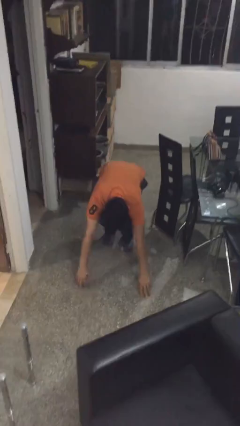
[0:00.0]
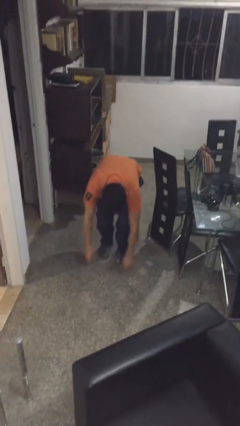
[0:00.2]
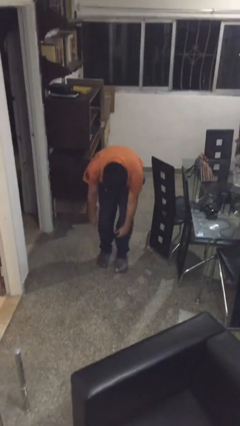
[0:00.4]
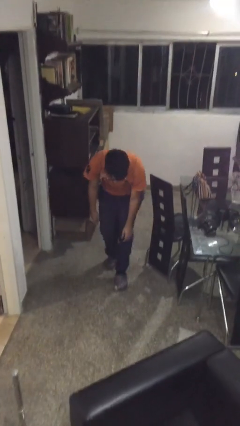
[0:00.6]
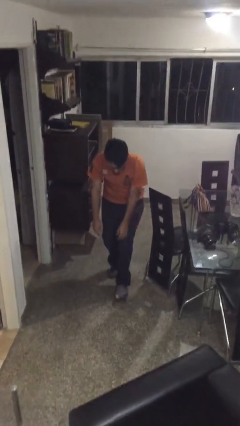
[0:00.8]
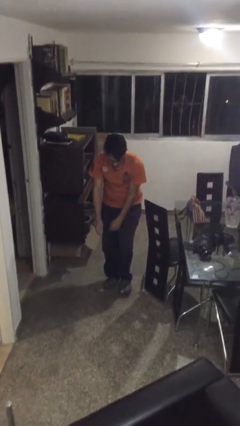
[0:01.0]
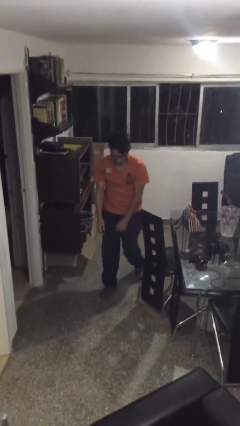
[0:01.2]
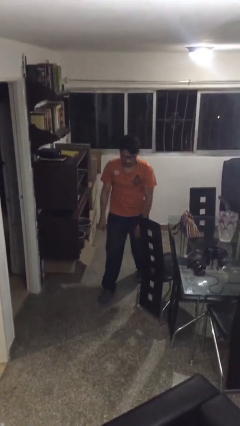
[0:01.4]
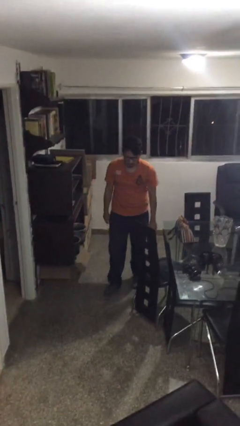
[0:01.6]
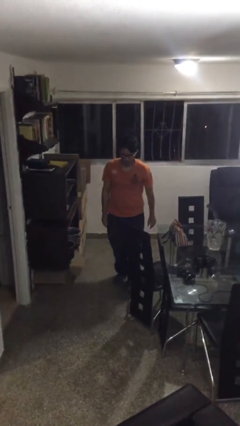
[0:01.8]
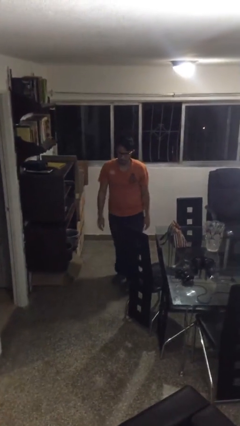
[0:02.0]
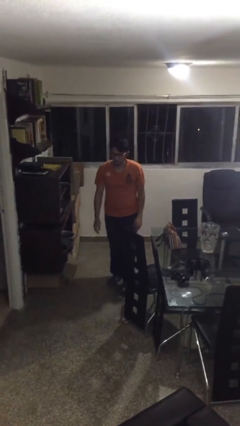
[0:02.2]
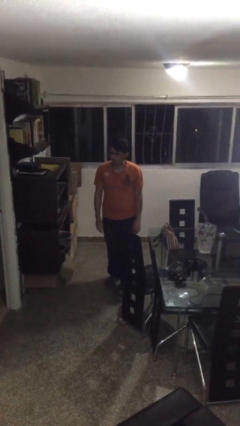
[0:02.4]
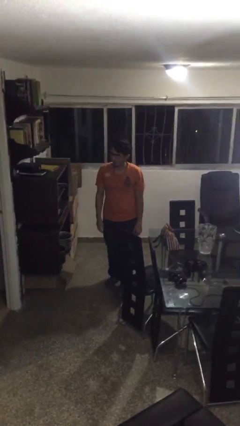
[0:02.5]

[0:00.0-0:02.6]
person stands up from floor

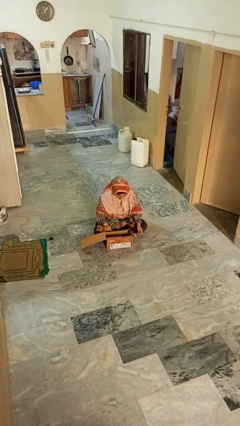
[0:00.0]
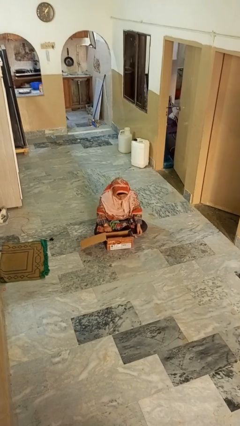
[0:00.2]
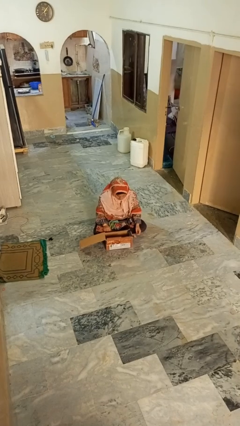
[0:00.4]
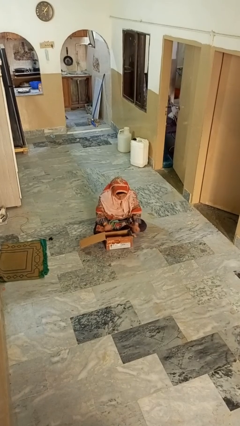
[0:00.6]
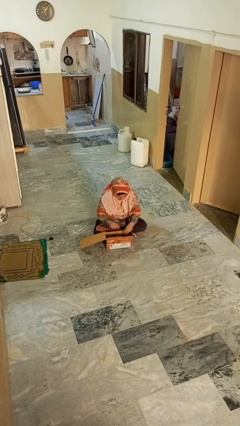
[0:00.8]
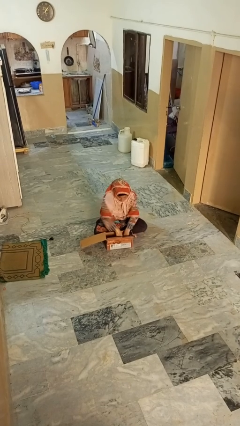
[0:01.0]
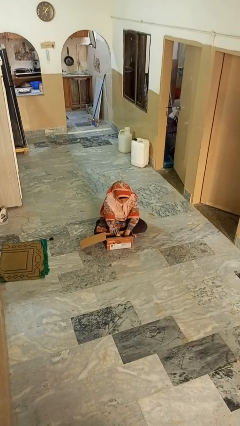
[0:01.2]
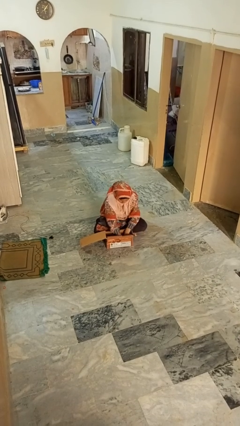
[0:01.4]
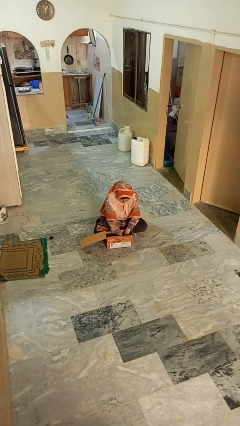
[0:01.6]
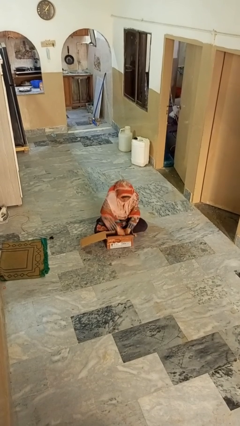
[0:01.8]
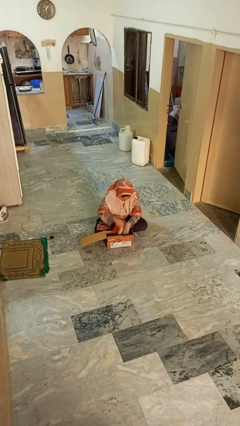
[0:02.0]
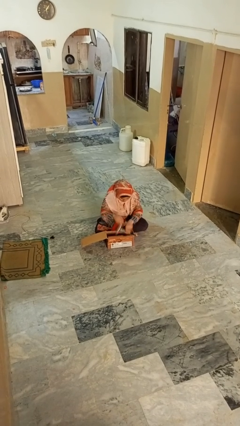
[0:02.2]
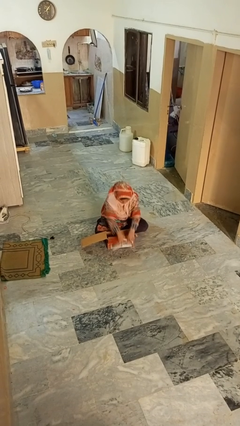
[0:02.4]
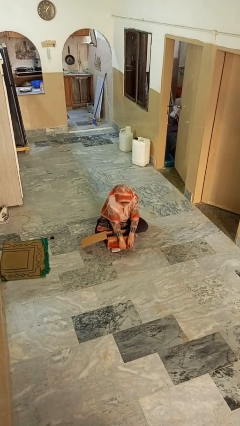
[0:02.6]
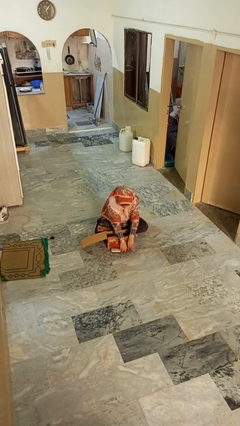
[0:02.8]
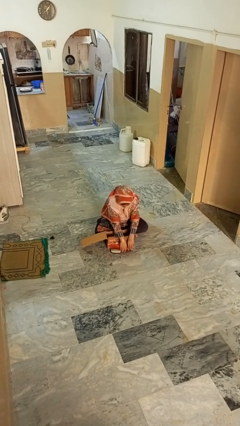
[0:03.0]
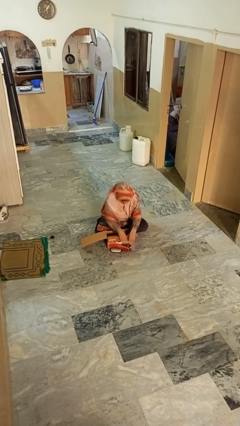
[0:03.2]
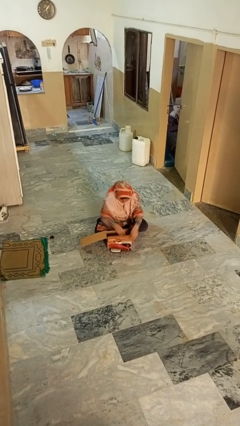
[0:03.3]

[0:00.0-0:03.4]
person takes object from box

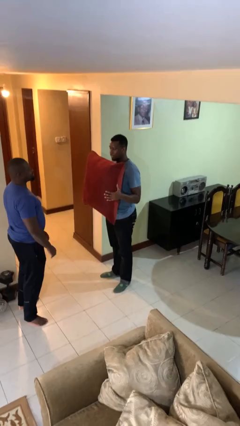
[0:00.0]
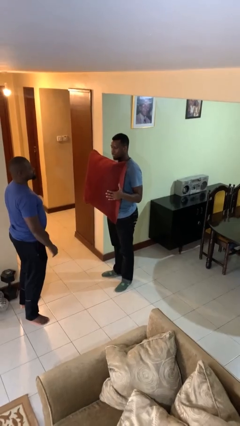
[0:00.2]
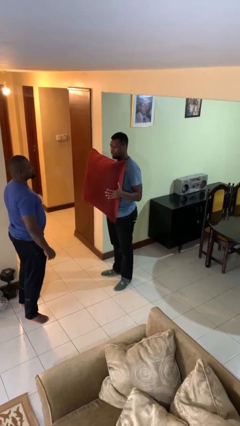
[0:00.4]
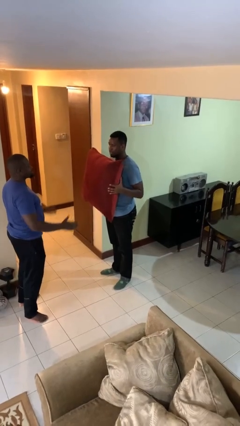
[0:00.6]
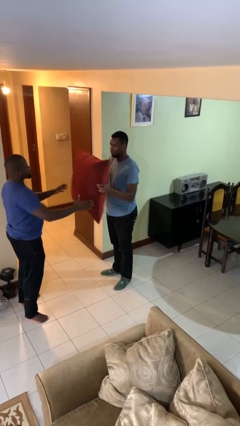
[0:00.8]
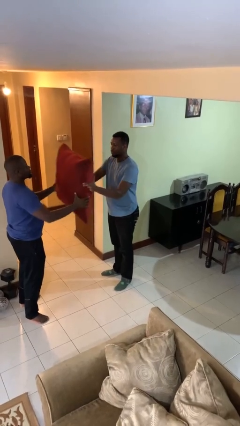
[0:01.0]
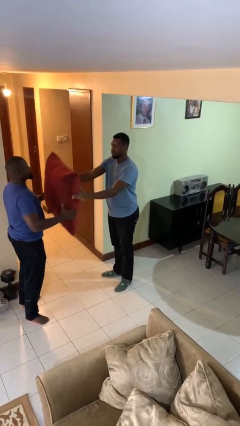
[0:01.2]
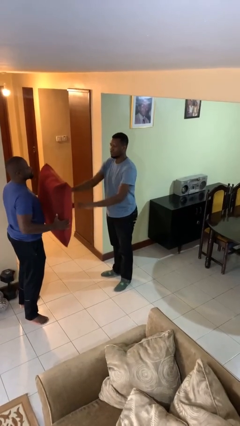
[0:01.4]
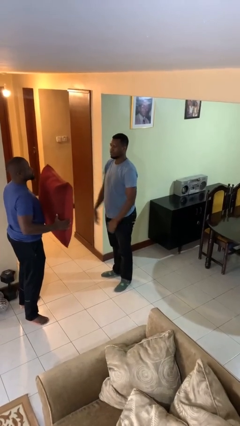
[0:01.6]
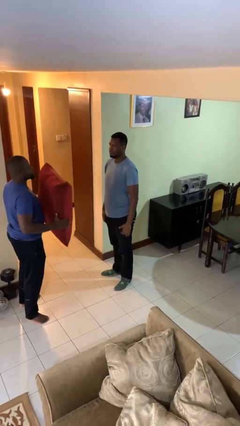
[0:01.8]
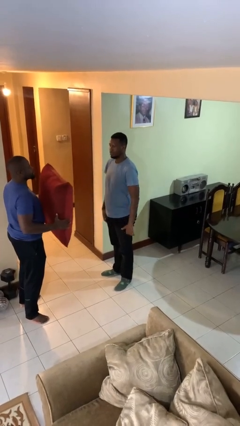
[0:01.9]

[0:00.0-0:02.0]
person transfers object to person

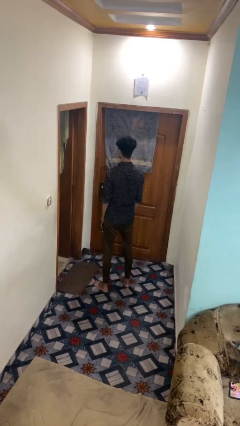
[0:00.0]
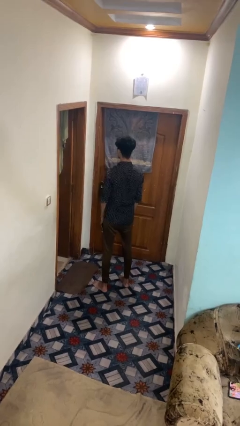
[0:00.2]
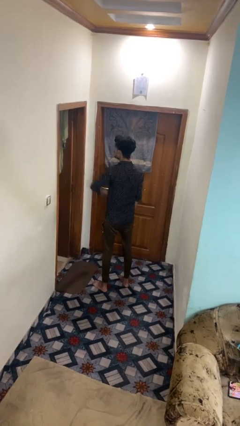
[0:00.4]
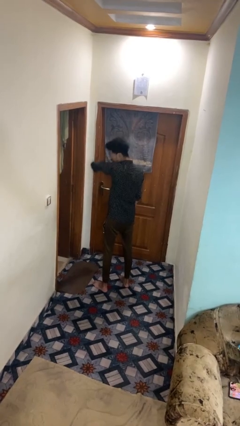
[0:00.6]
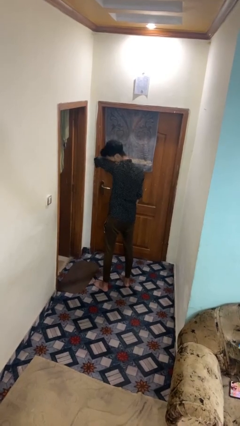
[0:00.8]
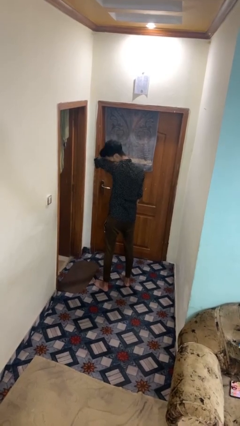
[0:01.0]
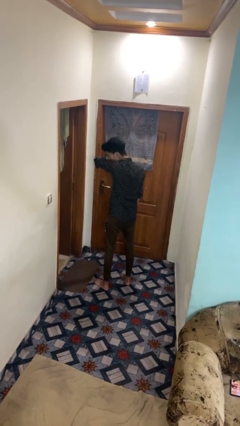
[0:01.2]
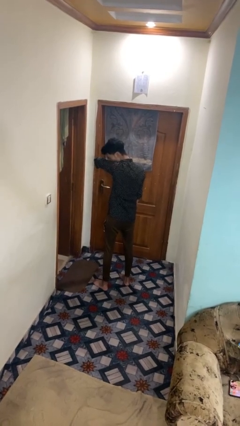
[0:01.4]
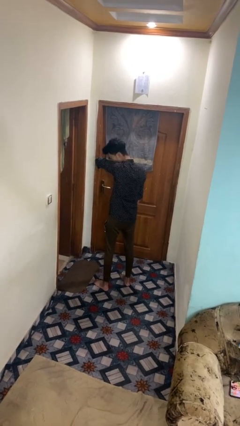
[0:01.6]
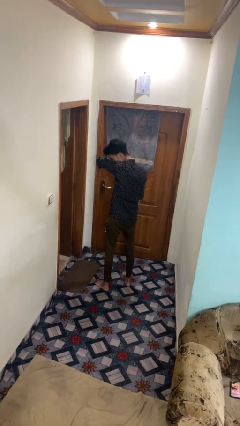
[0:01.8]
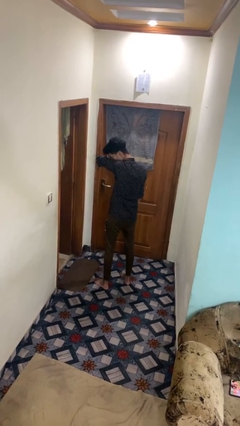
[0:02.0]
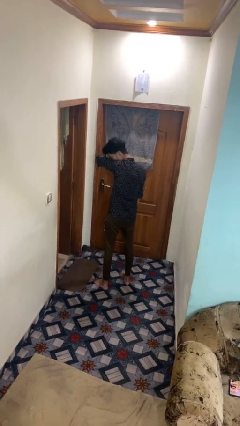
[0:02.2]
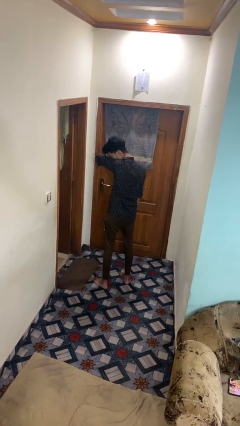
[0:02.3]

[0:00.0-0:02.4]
person sneezes into arm

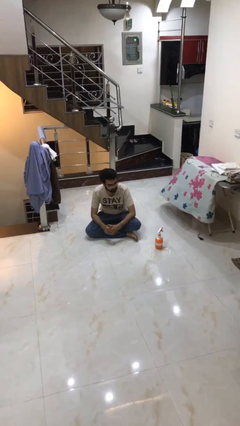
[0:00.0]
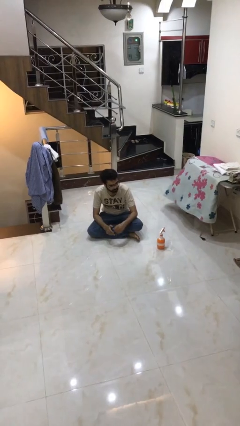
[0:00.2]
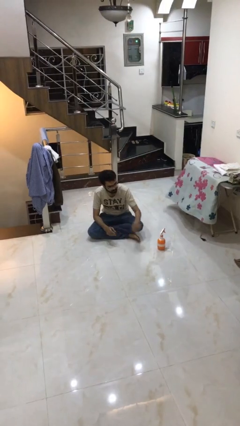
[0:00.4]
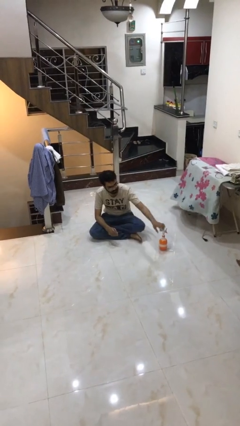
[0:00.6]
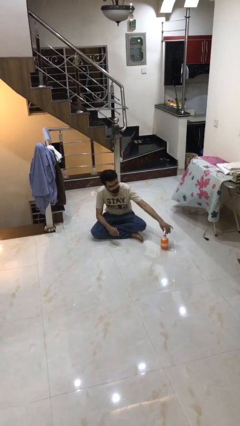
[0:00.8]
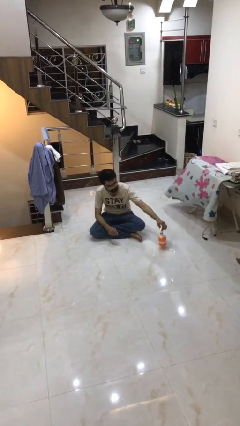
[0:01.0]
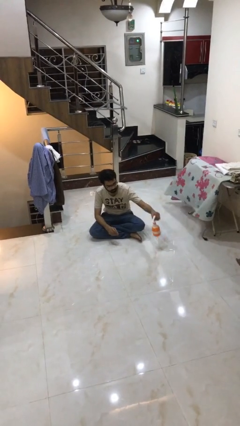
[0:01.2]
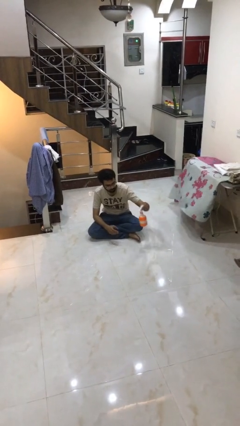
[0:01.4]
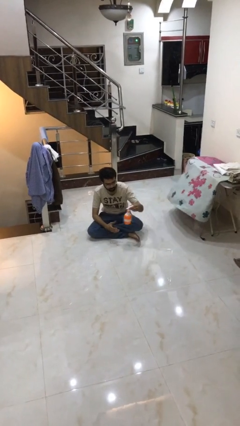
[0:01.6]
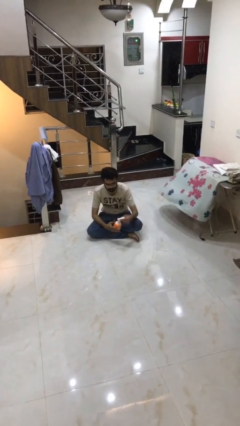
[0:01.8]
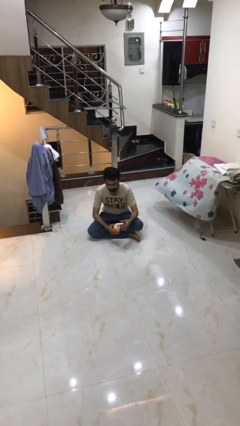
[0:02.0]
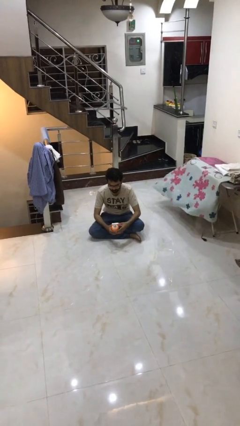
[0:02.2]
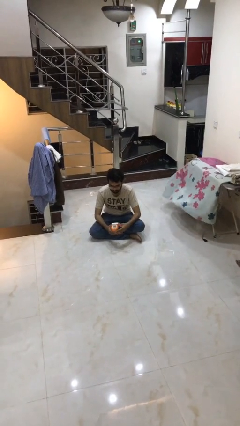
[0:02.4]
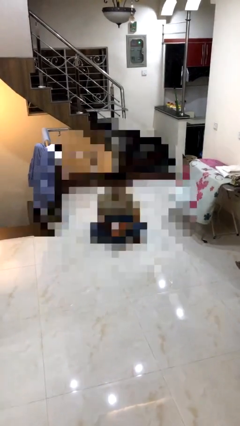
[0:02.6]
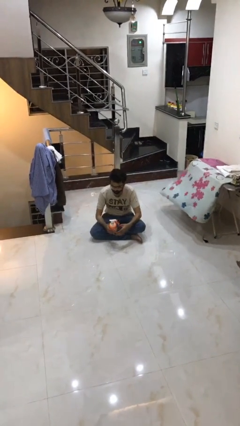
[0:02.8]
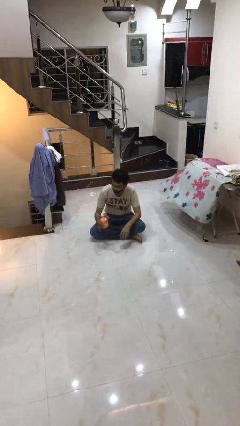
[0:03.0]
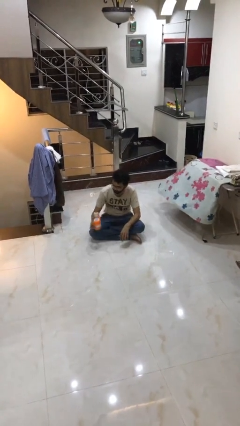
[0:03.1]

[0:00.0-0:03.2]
person picks up object from floor

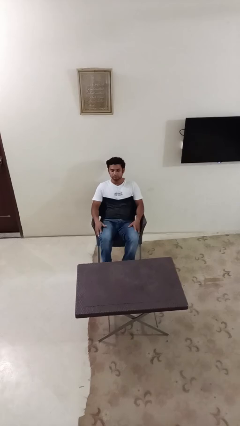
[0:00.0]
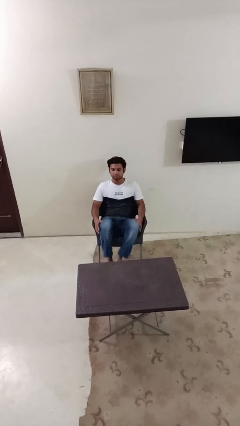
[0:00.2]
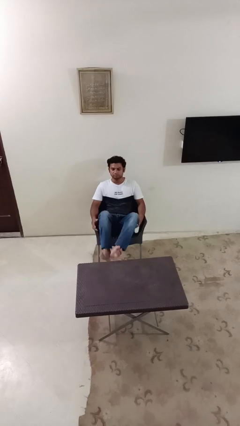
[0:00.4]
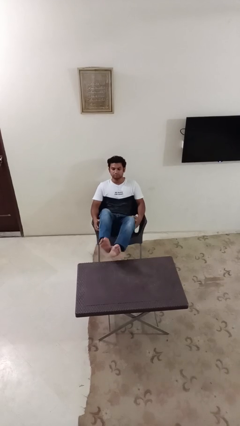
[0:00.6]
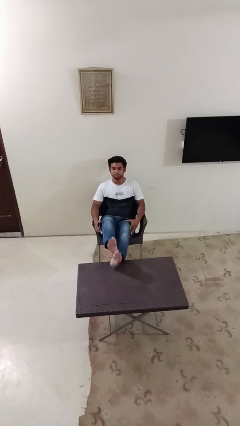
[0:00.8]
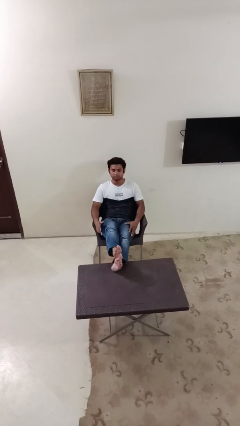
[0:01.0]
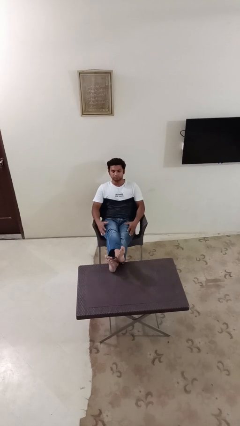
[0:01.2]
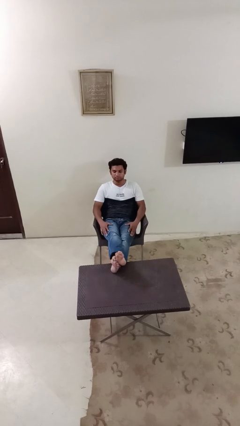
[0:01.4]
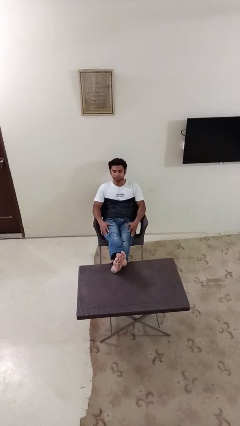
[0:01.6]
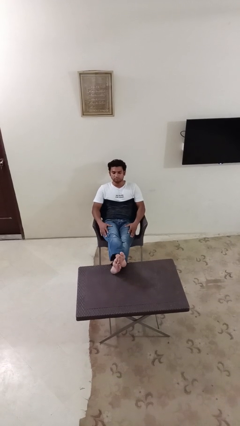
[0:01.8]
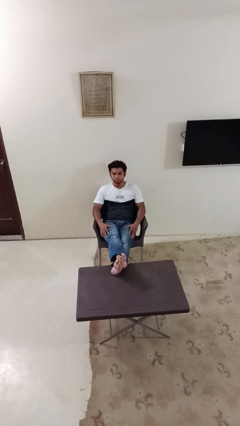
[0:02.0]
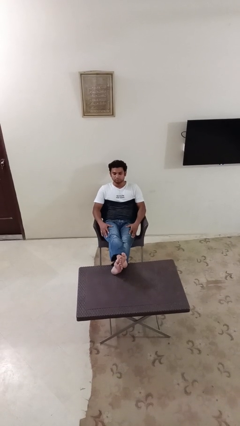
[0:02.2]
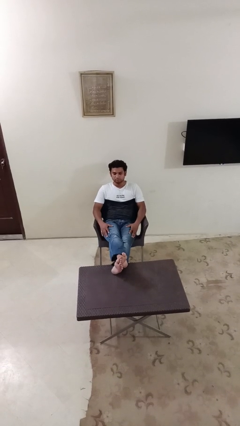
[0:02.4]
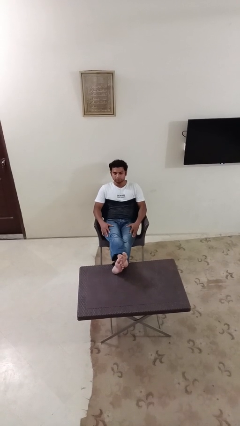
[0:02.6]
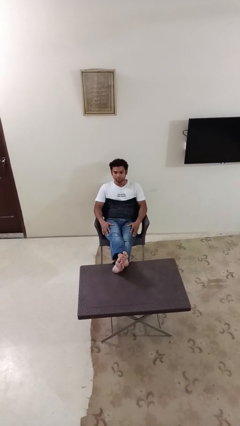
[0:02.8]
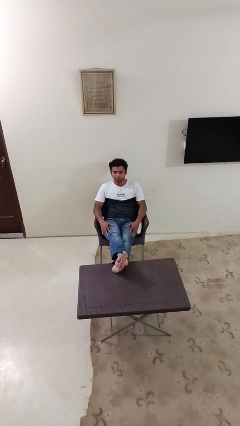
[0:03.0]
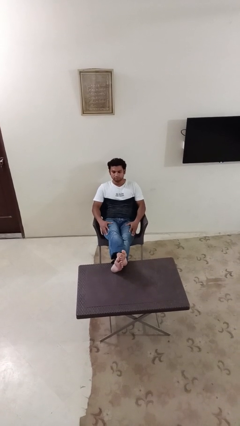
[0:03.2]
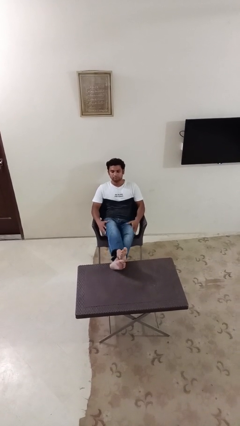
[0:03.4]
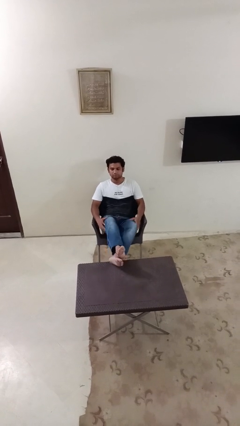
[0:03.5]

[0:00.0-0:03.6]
person puts feet up

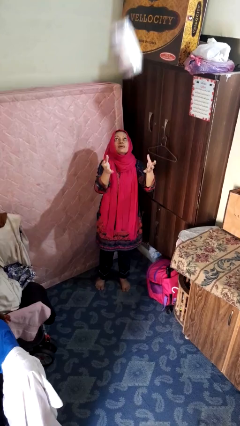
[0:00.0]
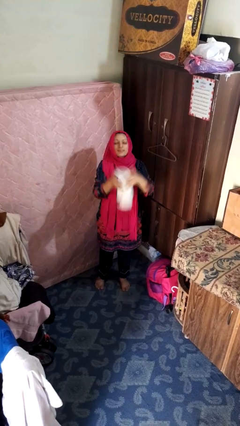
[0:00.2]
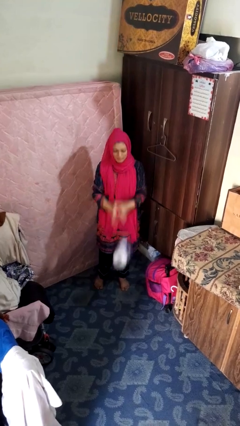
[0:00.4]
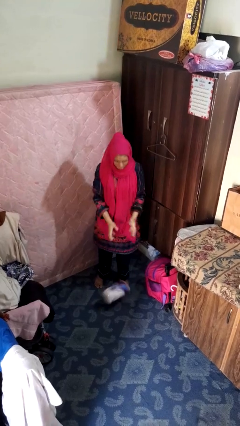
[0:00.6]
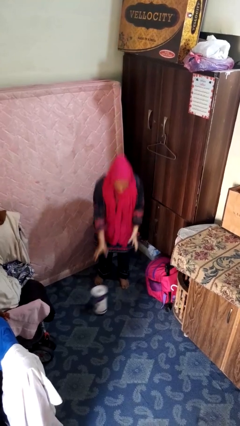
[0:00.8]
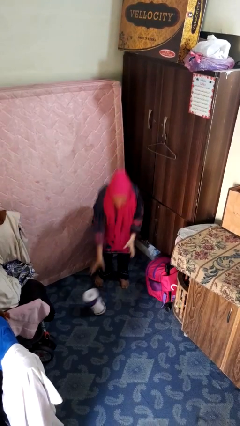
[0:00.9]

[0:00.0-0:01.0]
person catches dropped object
